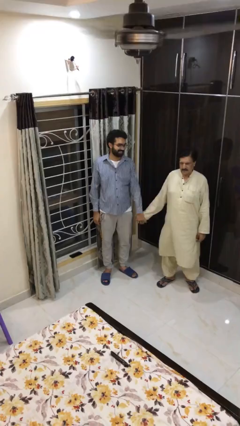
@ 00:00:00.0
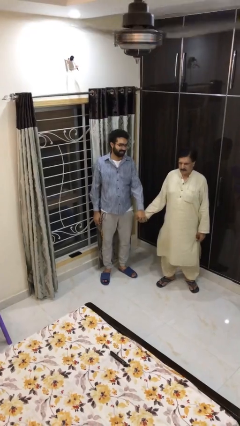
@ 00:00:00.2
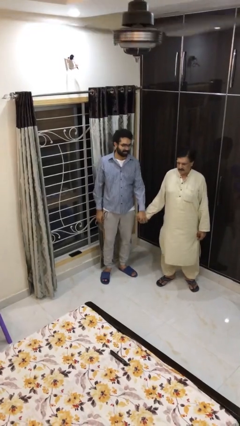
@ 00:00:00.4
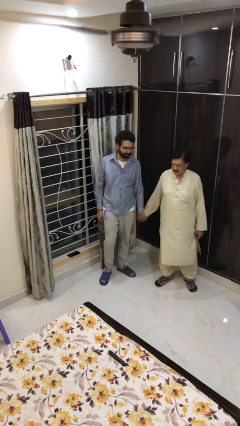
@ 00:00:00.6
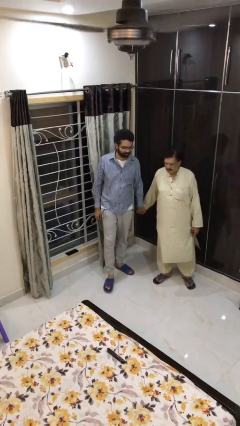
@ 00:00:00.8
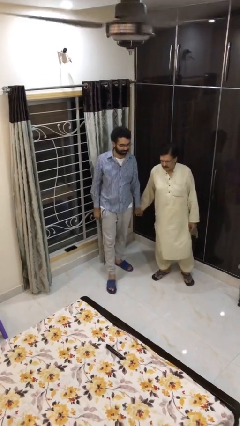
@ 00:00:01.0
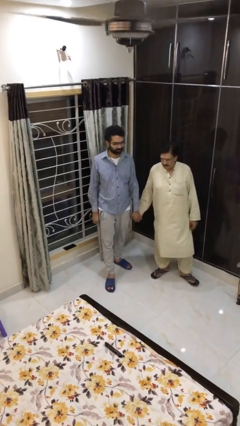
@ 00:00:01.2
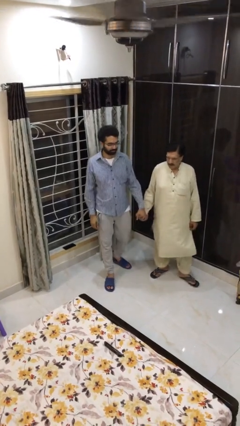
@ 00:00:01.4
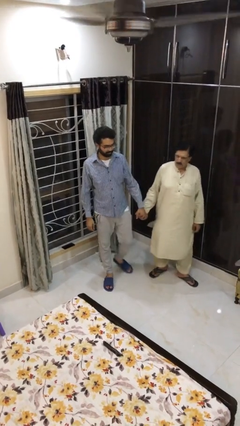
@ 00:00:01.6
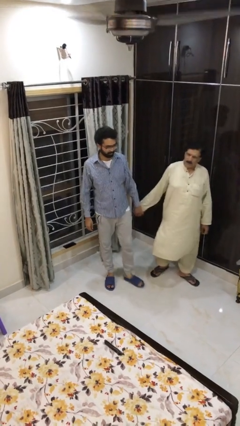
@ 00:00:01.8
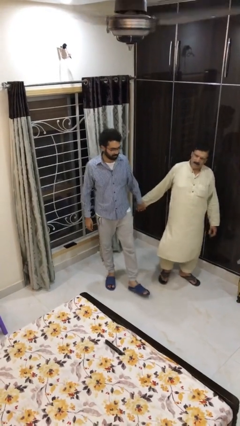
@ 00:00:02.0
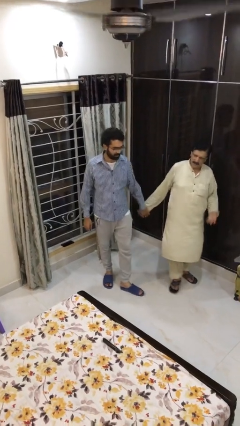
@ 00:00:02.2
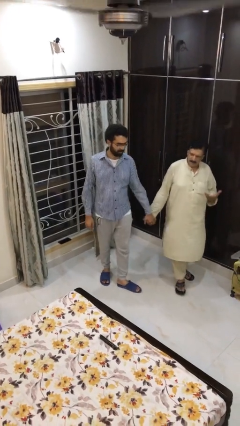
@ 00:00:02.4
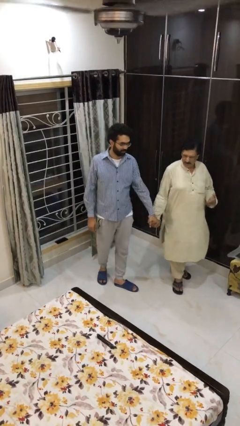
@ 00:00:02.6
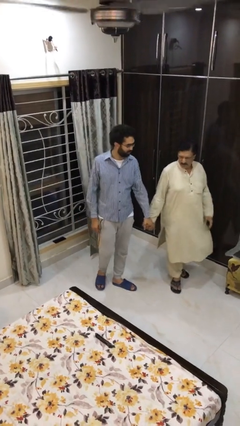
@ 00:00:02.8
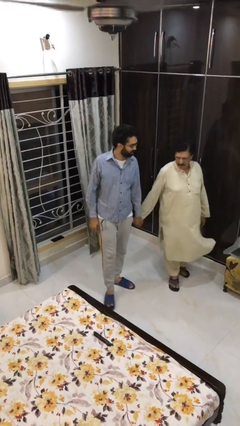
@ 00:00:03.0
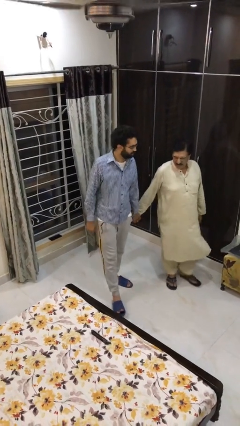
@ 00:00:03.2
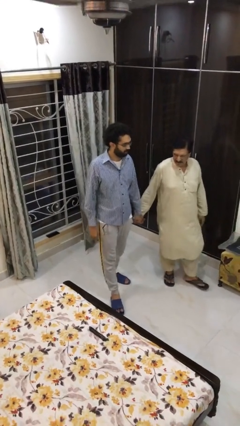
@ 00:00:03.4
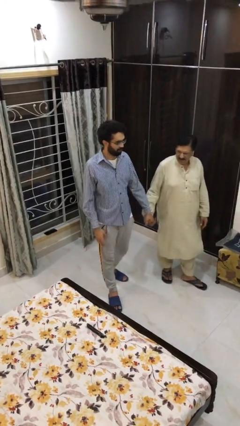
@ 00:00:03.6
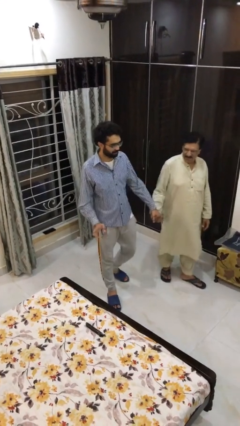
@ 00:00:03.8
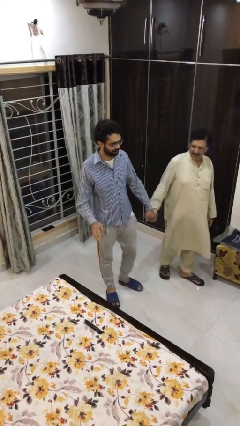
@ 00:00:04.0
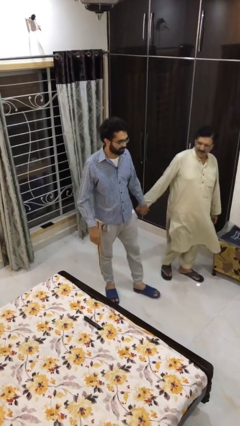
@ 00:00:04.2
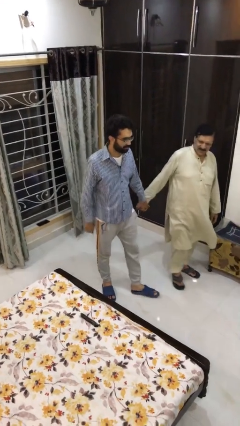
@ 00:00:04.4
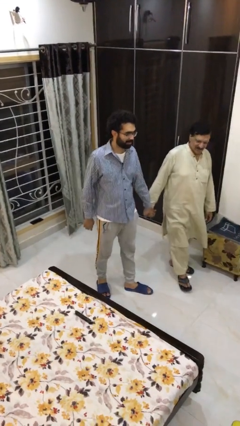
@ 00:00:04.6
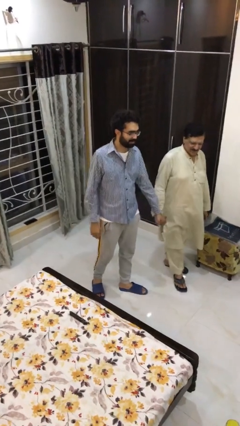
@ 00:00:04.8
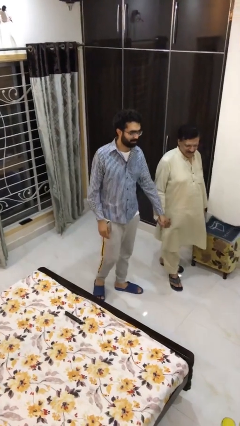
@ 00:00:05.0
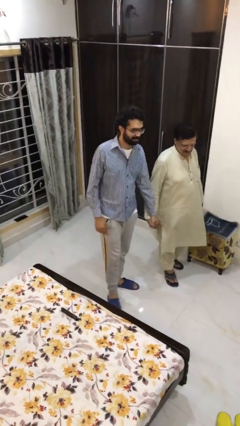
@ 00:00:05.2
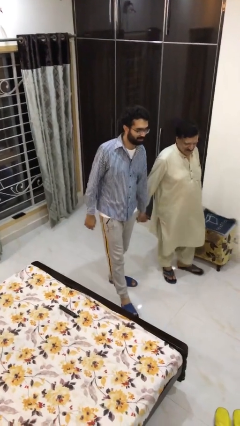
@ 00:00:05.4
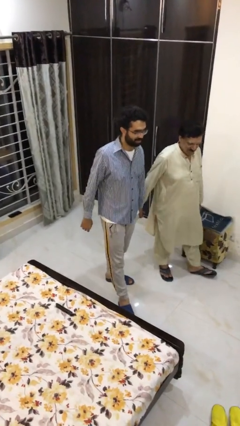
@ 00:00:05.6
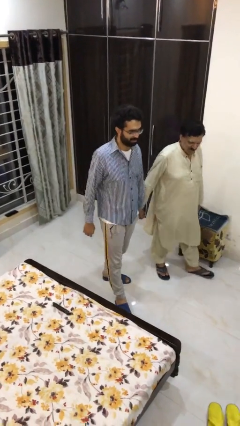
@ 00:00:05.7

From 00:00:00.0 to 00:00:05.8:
person holds hand

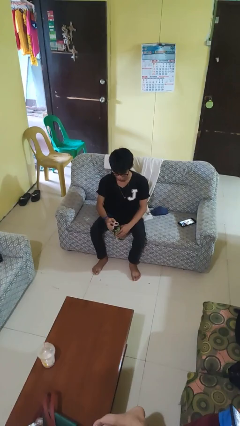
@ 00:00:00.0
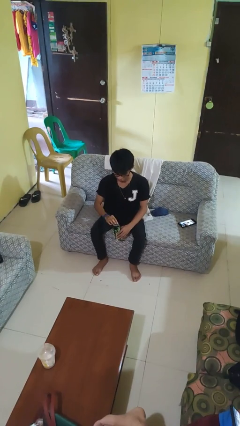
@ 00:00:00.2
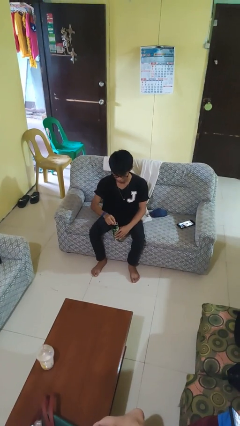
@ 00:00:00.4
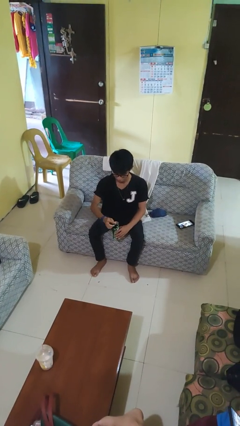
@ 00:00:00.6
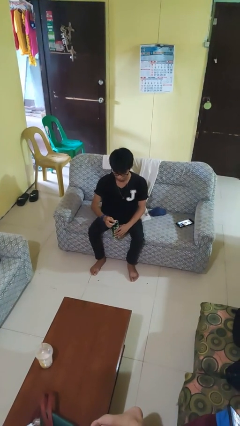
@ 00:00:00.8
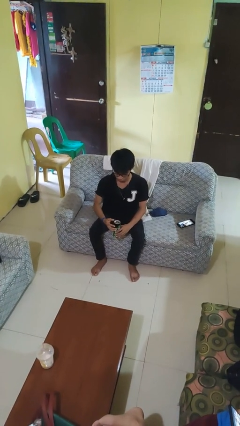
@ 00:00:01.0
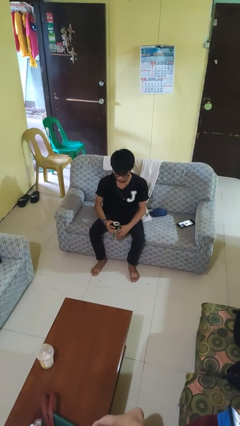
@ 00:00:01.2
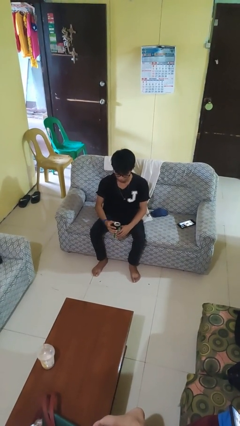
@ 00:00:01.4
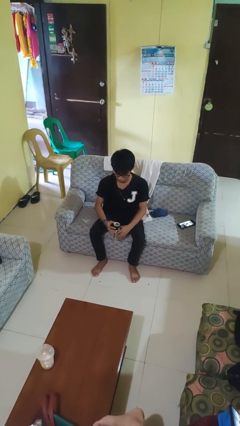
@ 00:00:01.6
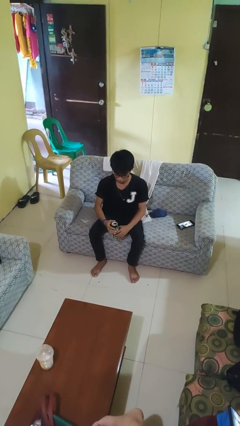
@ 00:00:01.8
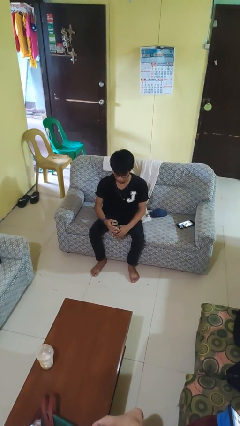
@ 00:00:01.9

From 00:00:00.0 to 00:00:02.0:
person opens beverage can

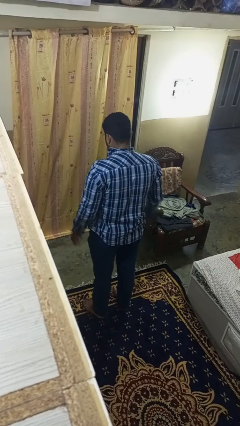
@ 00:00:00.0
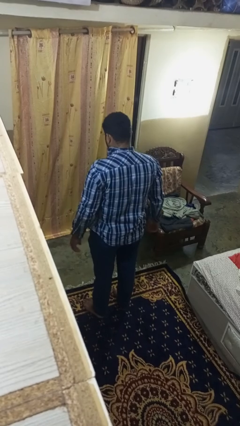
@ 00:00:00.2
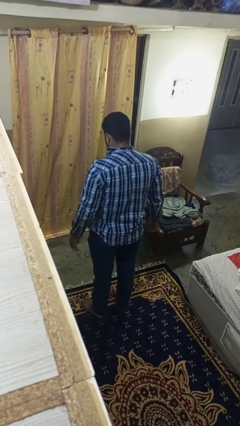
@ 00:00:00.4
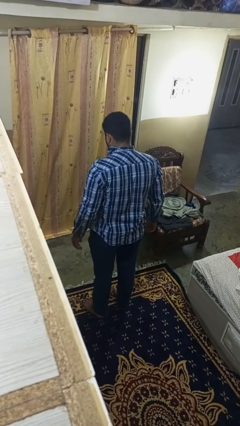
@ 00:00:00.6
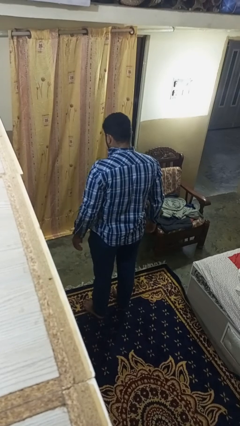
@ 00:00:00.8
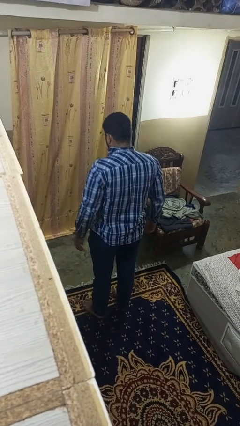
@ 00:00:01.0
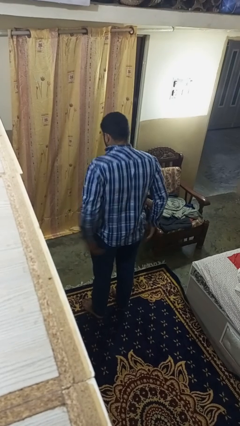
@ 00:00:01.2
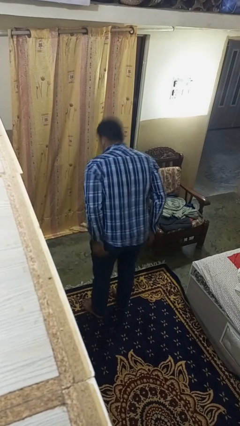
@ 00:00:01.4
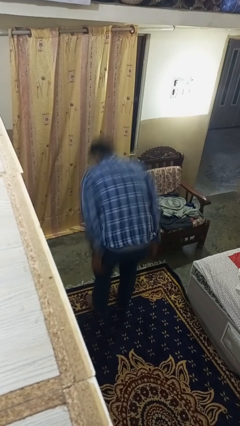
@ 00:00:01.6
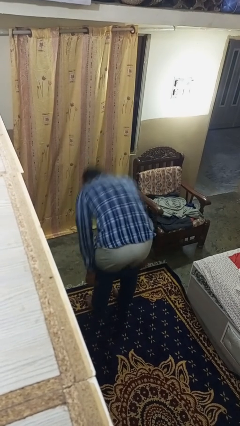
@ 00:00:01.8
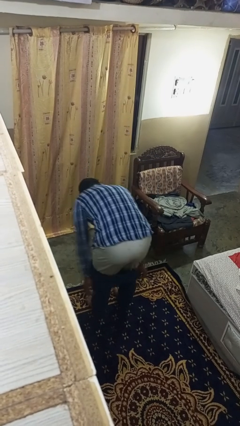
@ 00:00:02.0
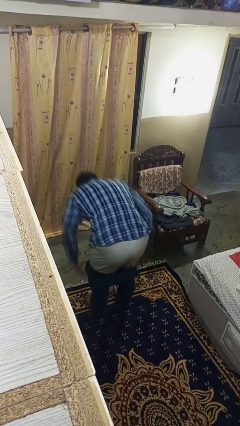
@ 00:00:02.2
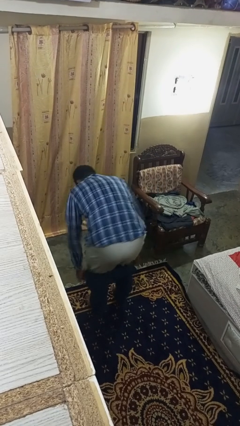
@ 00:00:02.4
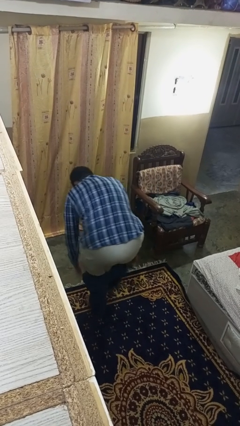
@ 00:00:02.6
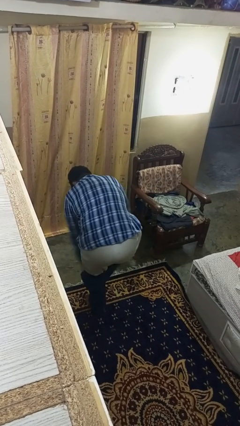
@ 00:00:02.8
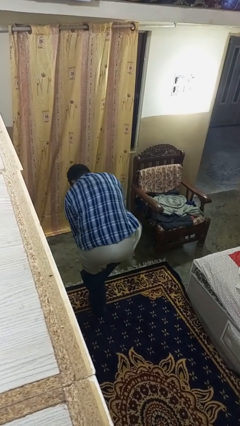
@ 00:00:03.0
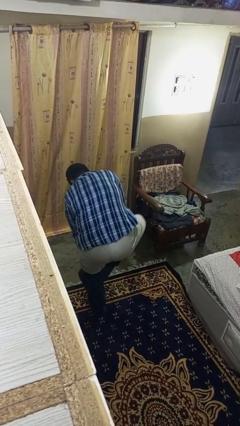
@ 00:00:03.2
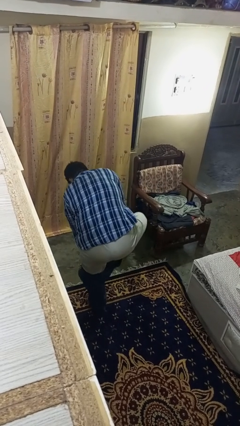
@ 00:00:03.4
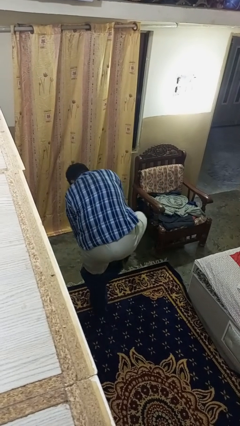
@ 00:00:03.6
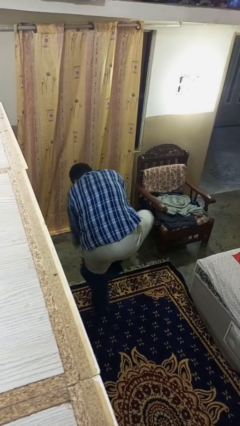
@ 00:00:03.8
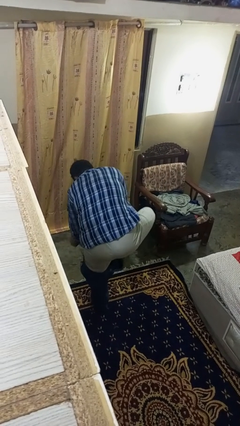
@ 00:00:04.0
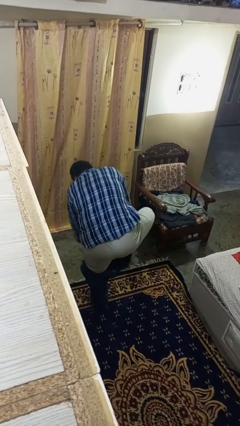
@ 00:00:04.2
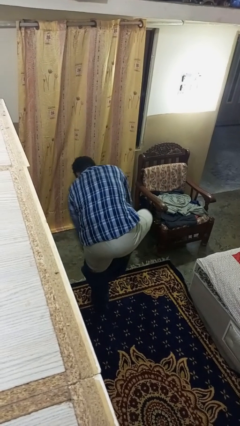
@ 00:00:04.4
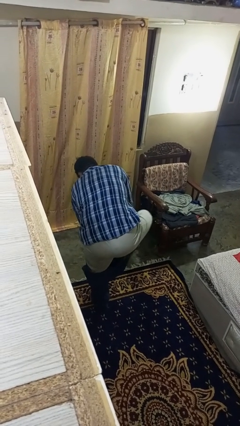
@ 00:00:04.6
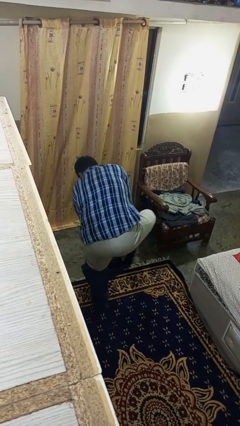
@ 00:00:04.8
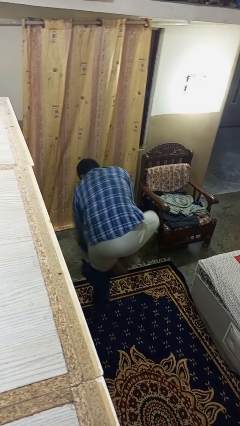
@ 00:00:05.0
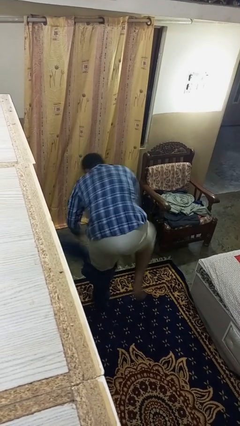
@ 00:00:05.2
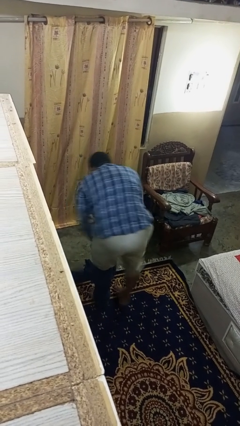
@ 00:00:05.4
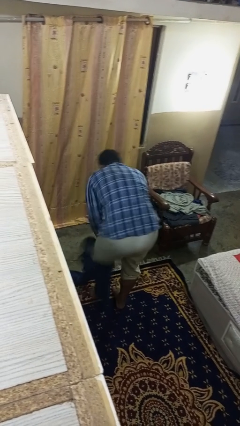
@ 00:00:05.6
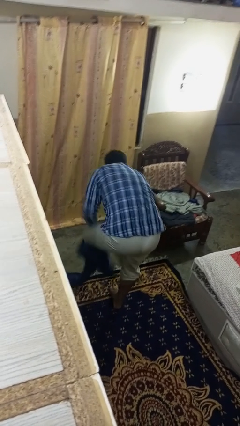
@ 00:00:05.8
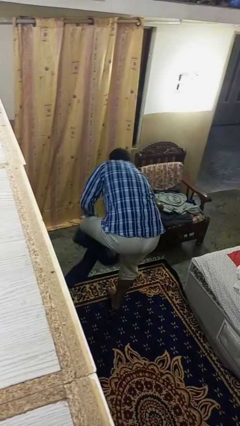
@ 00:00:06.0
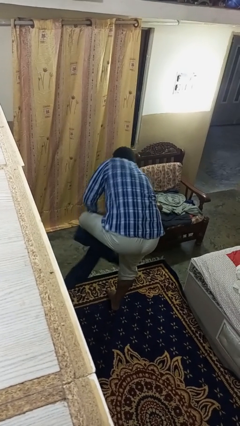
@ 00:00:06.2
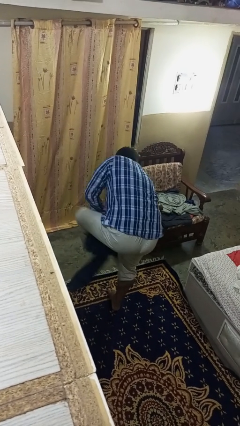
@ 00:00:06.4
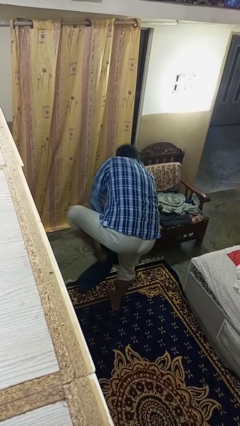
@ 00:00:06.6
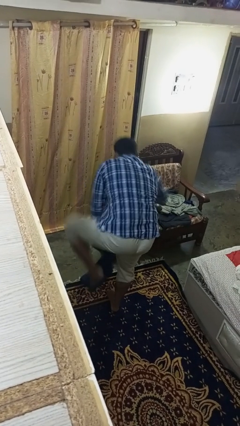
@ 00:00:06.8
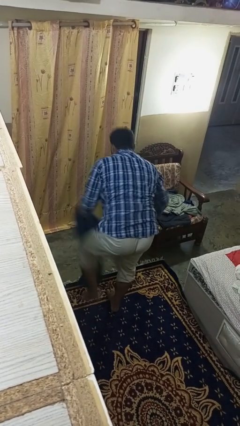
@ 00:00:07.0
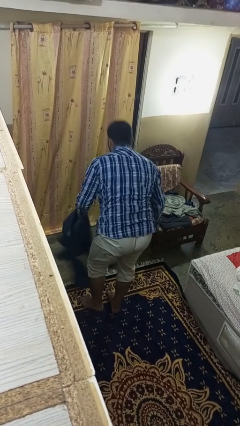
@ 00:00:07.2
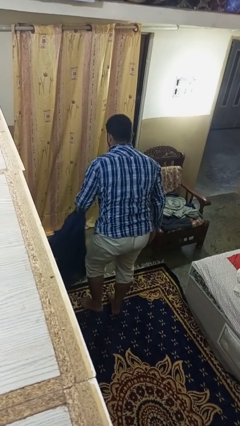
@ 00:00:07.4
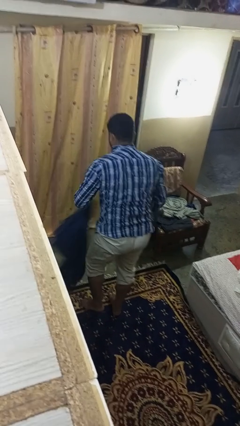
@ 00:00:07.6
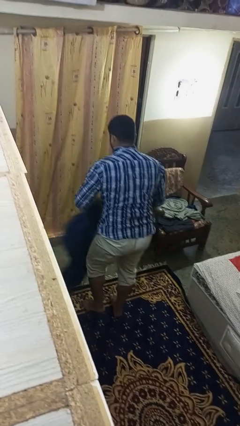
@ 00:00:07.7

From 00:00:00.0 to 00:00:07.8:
person takes off pants

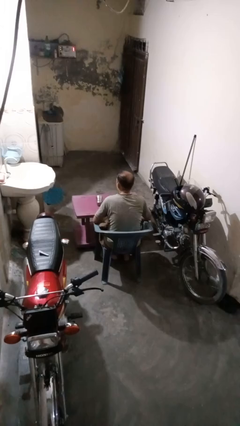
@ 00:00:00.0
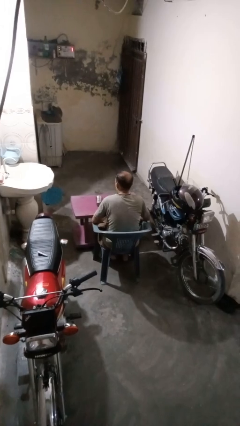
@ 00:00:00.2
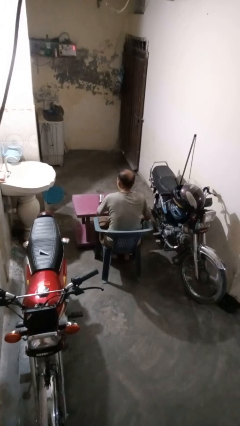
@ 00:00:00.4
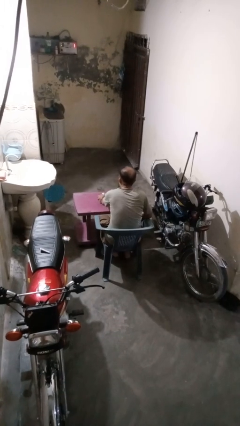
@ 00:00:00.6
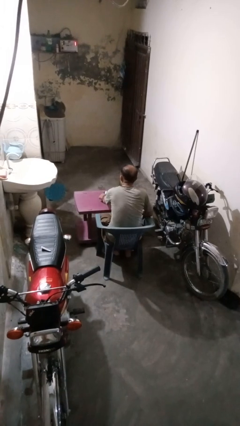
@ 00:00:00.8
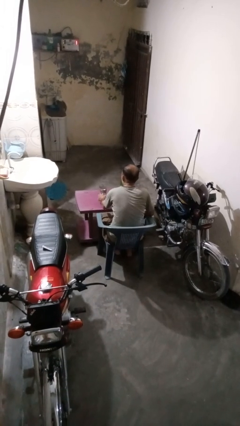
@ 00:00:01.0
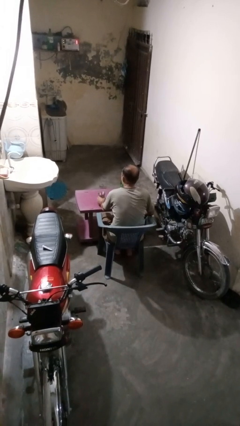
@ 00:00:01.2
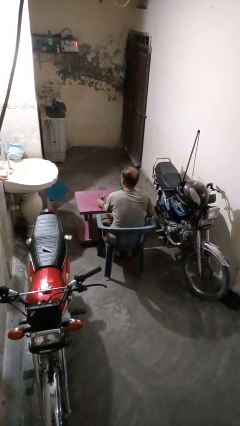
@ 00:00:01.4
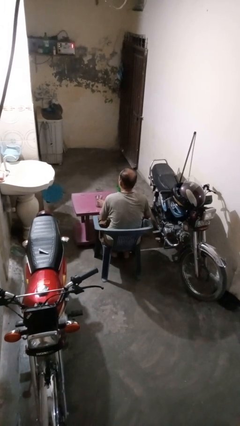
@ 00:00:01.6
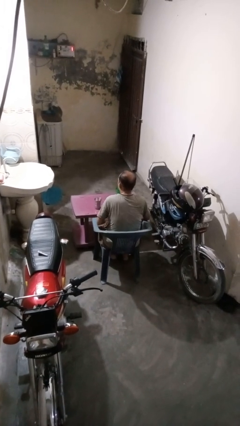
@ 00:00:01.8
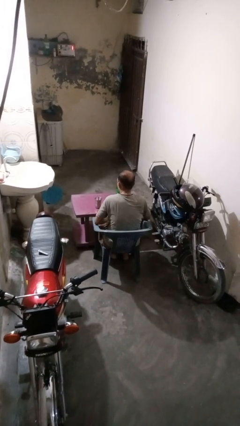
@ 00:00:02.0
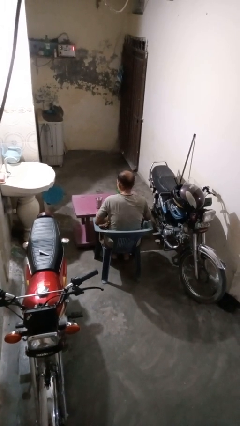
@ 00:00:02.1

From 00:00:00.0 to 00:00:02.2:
person sets upright glass
